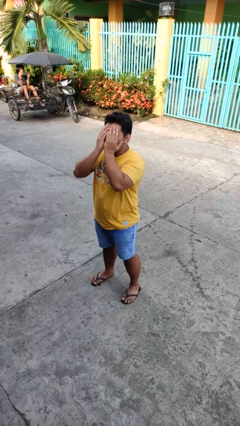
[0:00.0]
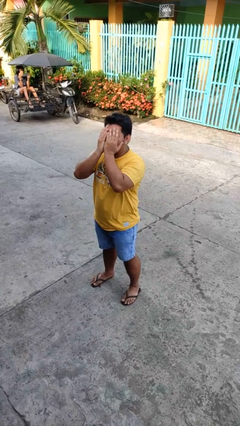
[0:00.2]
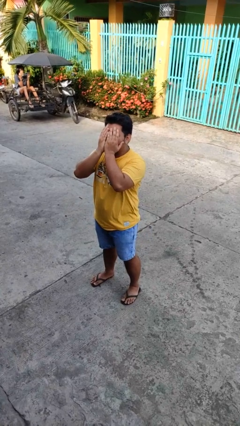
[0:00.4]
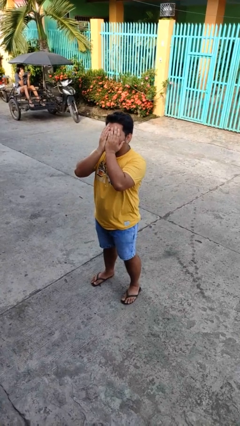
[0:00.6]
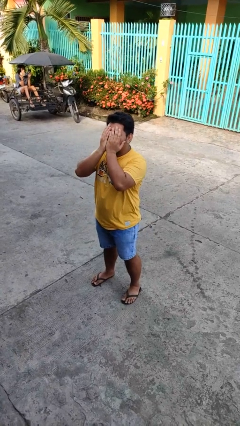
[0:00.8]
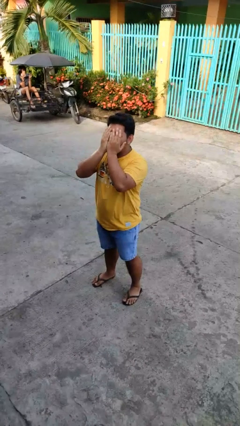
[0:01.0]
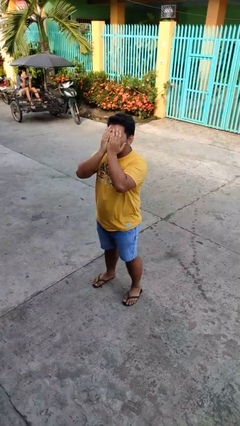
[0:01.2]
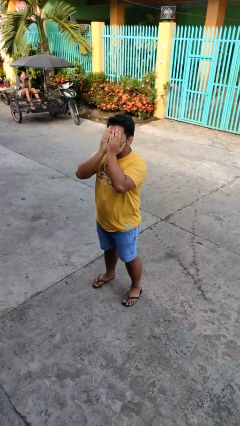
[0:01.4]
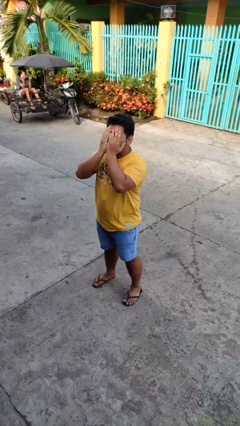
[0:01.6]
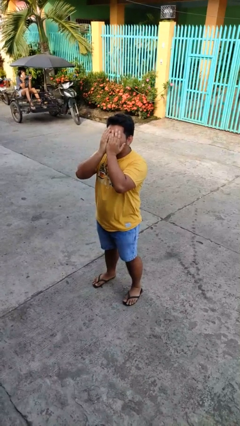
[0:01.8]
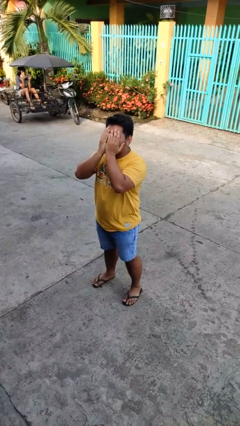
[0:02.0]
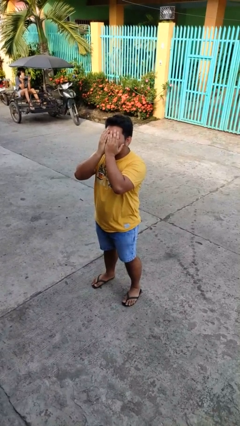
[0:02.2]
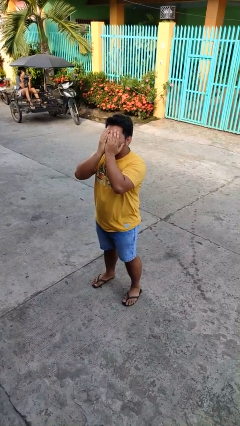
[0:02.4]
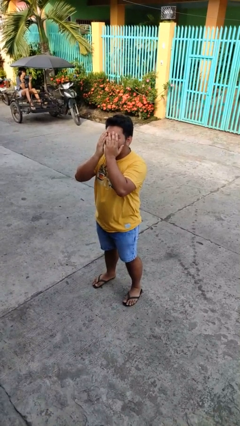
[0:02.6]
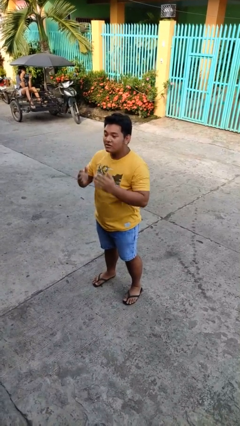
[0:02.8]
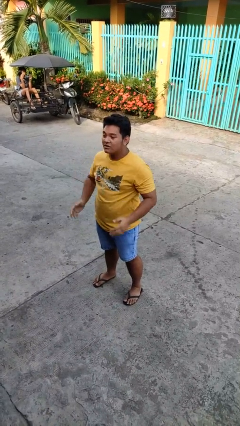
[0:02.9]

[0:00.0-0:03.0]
person covers face with hands

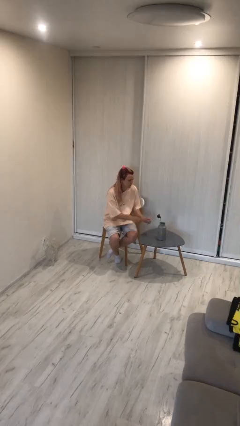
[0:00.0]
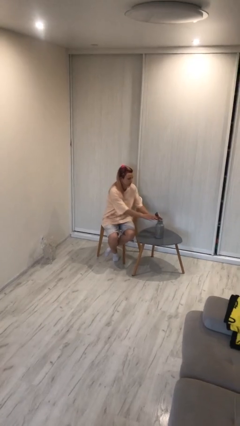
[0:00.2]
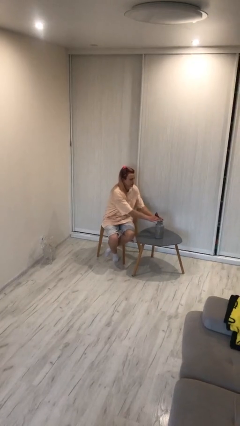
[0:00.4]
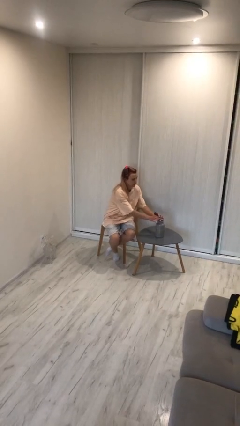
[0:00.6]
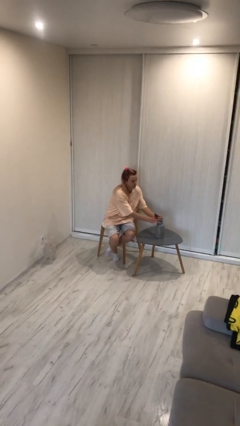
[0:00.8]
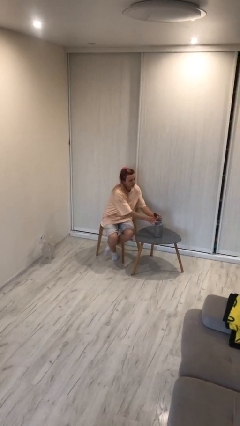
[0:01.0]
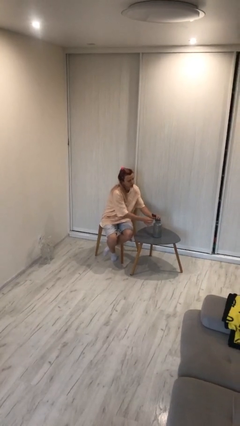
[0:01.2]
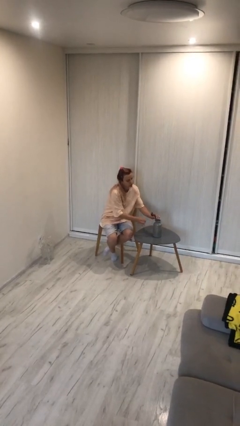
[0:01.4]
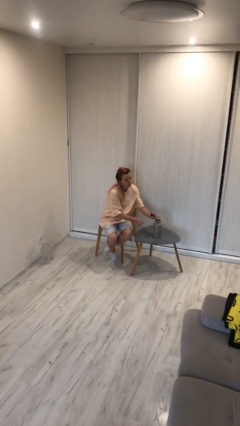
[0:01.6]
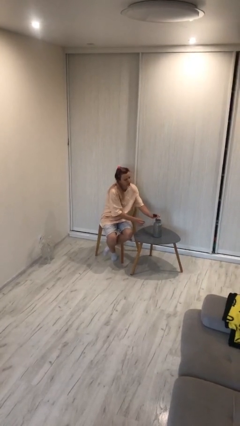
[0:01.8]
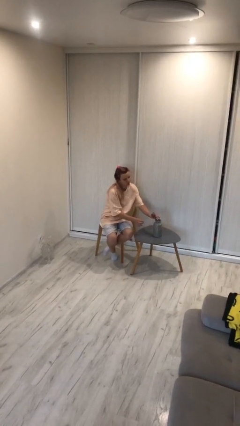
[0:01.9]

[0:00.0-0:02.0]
person arranges flowers in vase

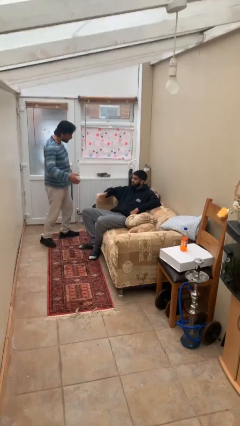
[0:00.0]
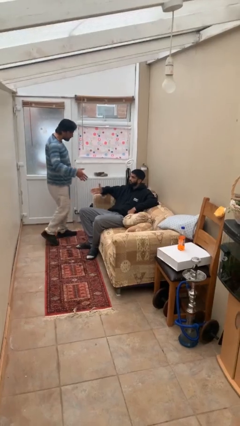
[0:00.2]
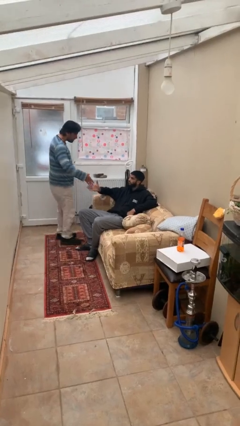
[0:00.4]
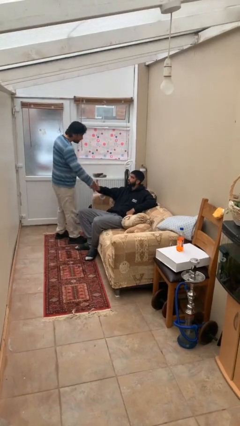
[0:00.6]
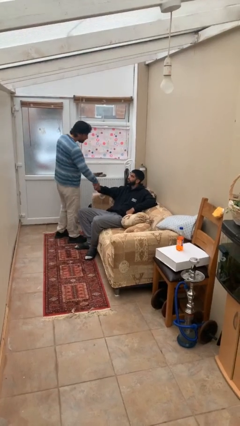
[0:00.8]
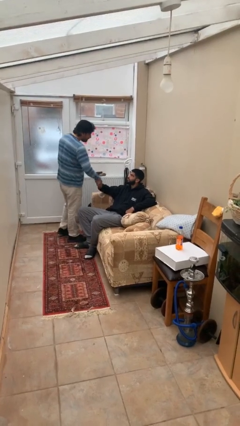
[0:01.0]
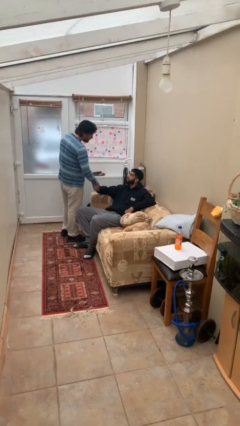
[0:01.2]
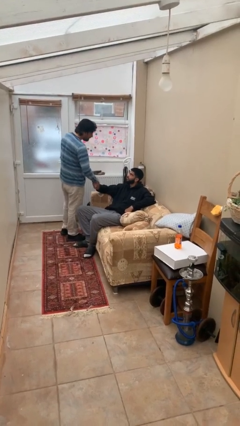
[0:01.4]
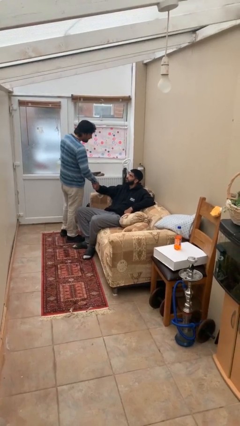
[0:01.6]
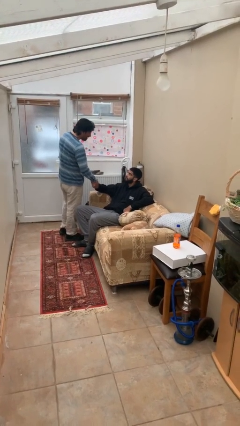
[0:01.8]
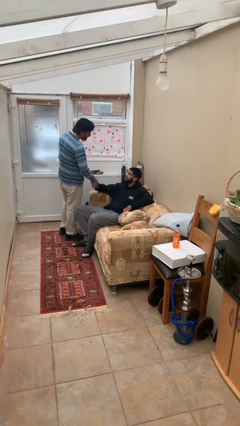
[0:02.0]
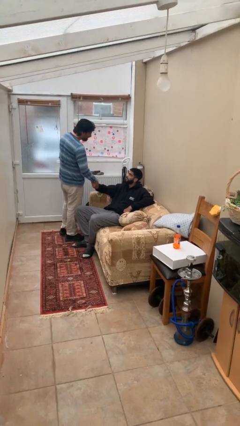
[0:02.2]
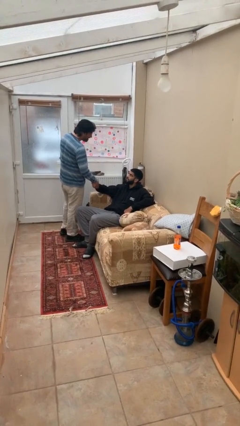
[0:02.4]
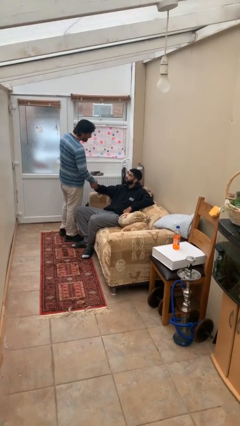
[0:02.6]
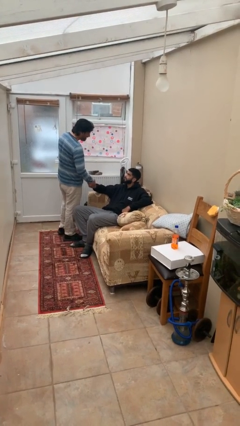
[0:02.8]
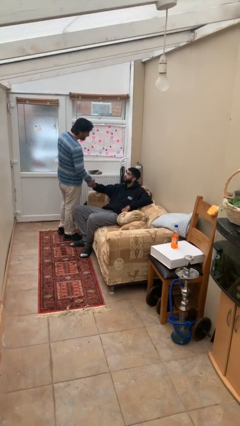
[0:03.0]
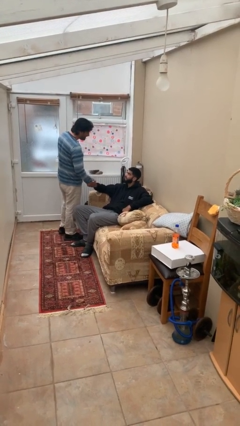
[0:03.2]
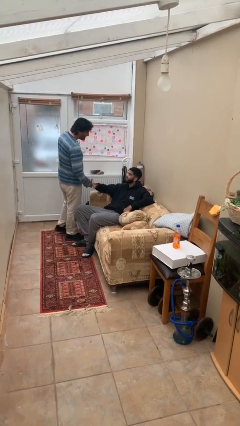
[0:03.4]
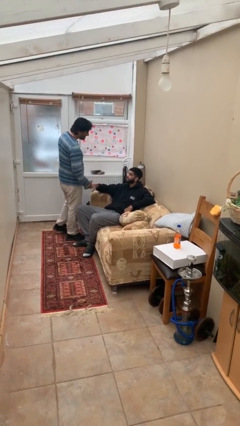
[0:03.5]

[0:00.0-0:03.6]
person shakes hand

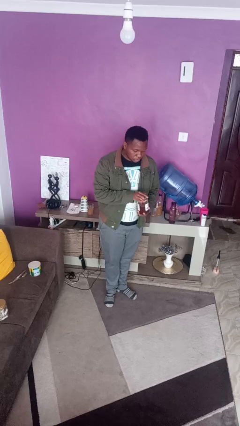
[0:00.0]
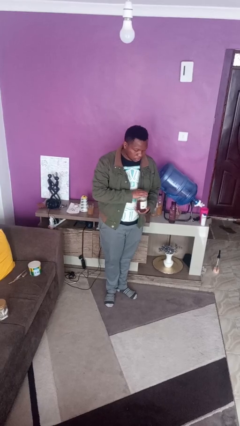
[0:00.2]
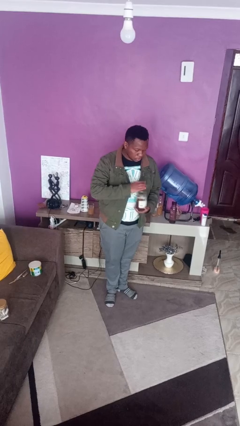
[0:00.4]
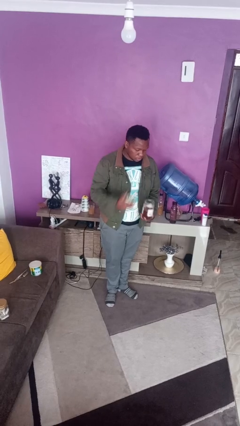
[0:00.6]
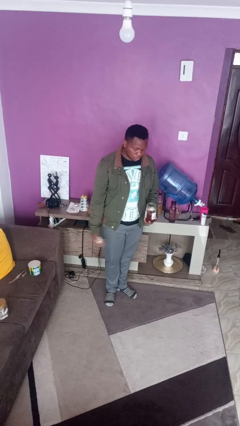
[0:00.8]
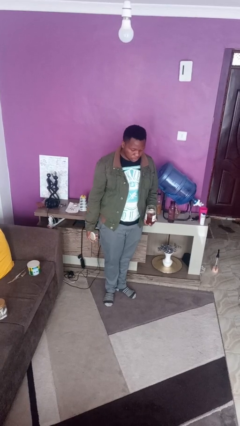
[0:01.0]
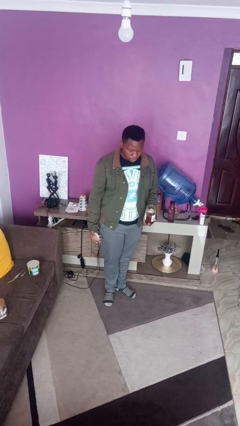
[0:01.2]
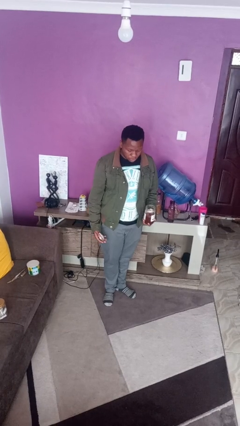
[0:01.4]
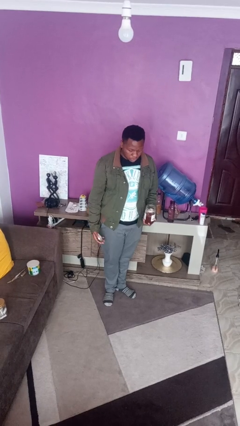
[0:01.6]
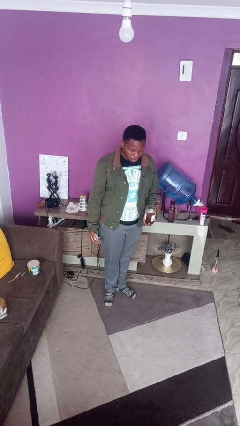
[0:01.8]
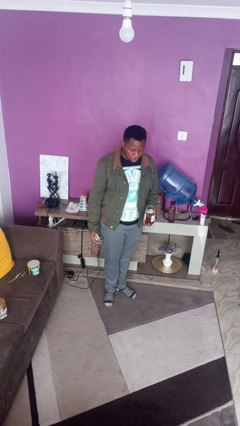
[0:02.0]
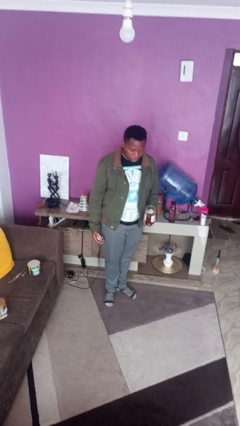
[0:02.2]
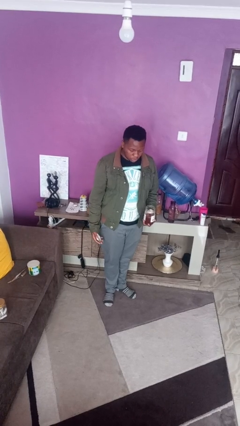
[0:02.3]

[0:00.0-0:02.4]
person opens jar

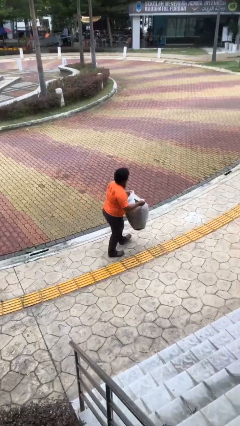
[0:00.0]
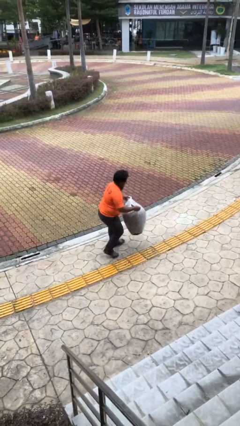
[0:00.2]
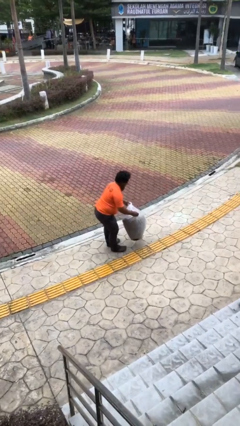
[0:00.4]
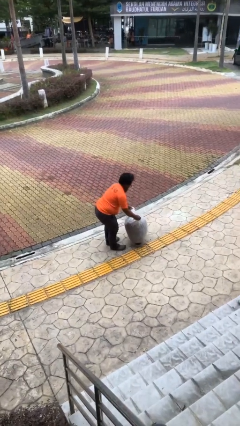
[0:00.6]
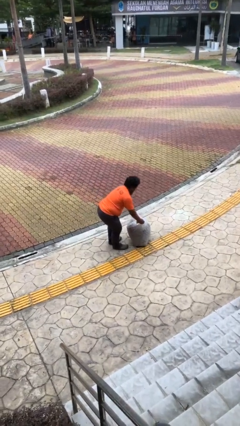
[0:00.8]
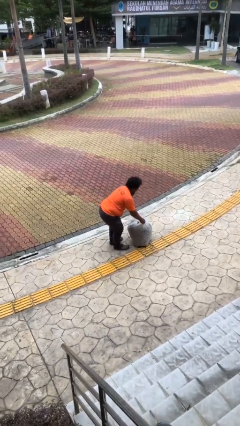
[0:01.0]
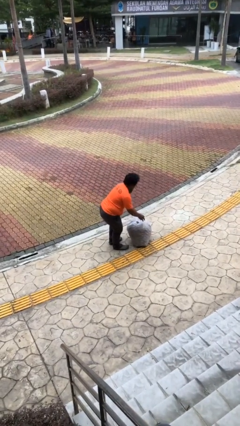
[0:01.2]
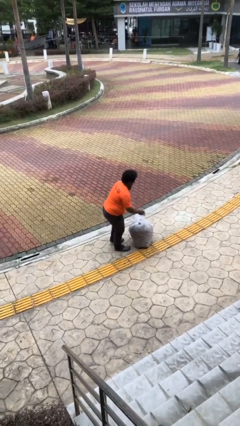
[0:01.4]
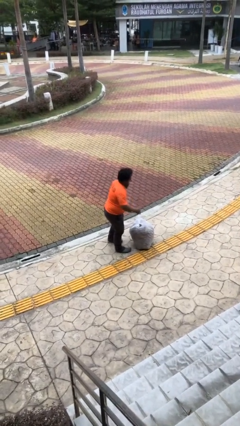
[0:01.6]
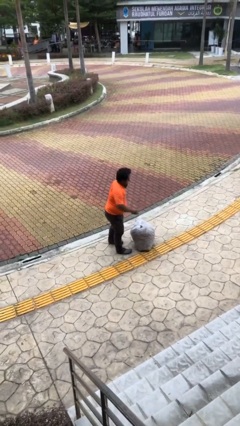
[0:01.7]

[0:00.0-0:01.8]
person puts down object on floor

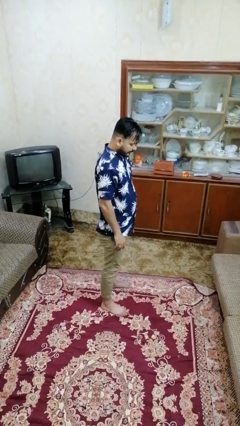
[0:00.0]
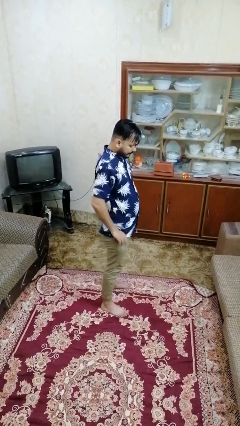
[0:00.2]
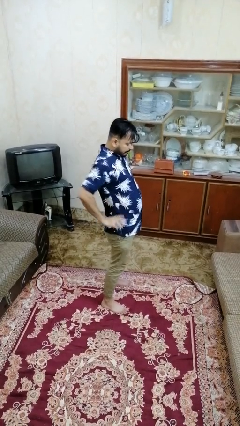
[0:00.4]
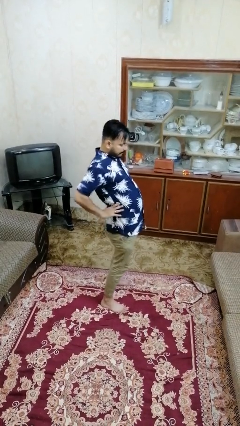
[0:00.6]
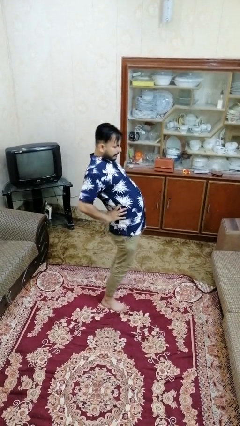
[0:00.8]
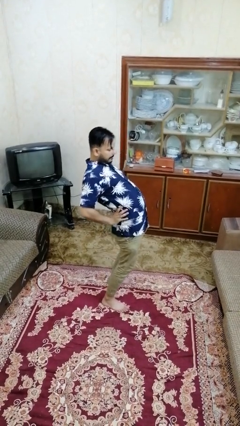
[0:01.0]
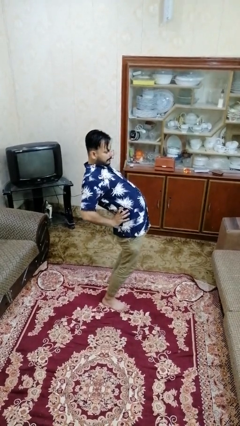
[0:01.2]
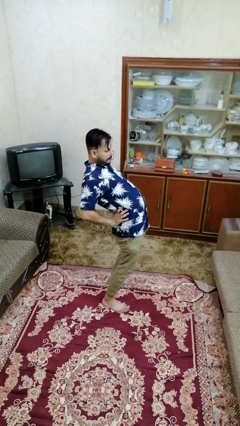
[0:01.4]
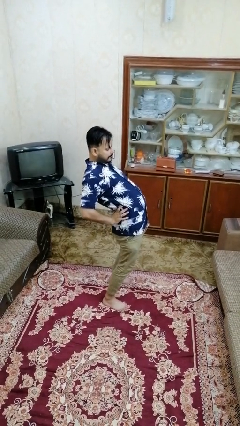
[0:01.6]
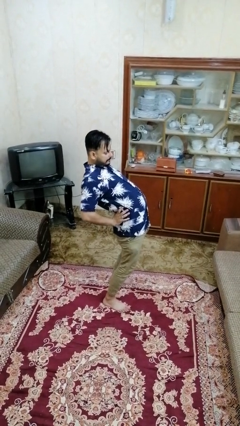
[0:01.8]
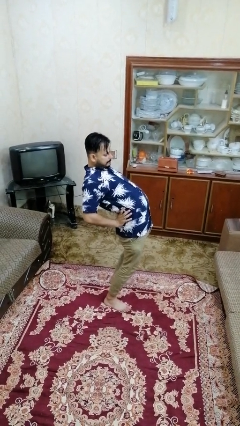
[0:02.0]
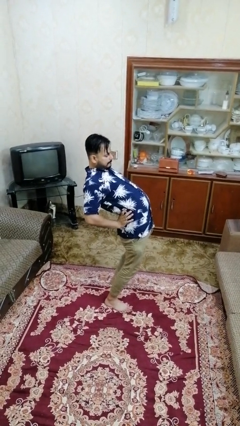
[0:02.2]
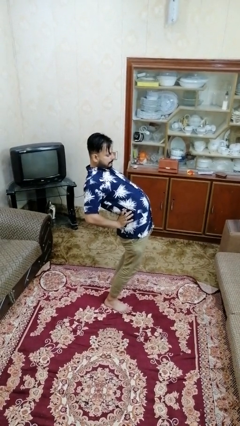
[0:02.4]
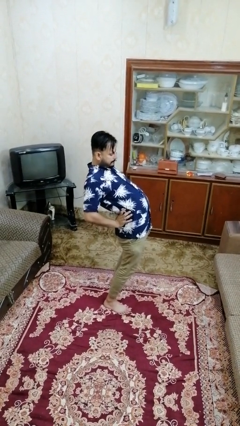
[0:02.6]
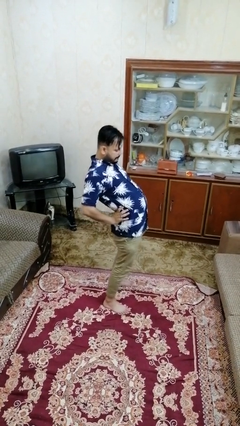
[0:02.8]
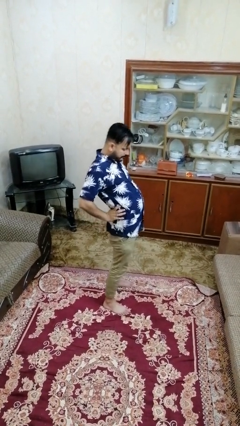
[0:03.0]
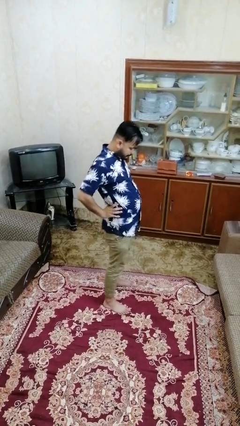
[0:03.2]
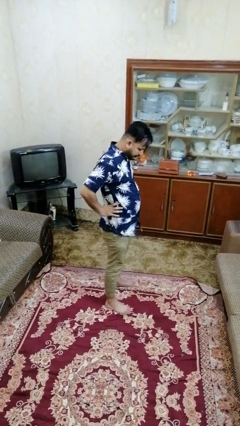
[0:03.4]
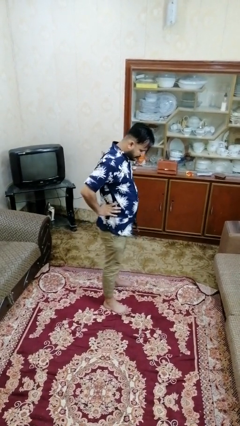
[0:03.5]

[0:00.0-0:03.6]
person stretches back

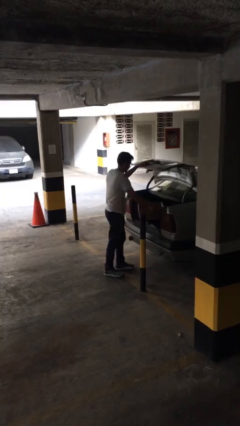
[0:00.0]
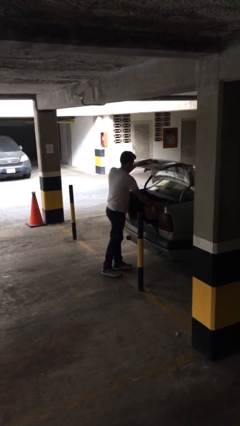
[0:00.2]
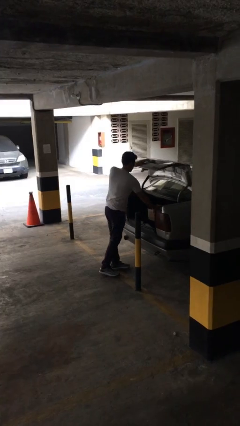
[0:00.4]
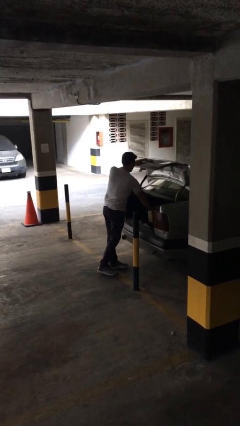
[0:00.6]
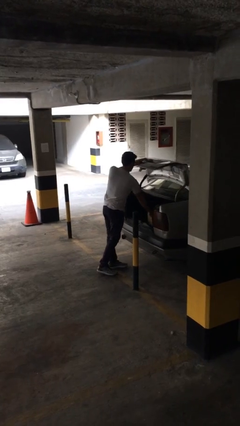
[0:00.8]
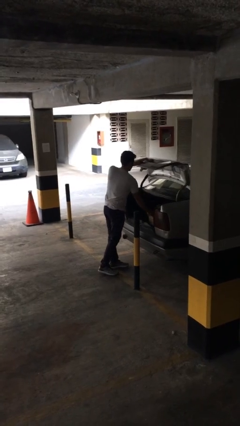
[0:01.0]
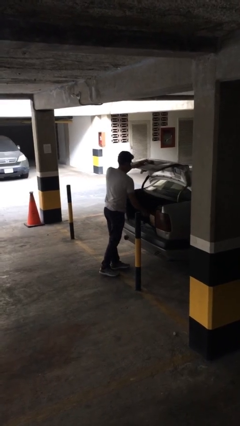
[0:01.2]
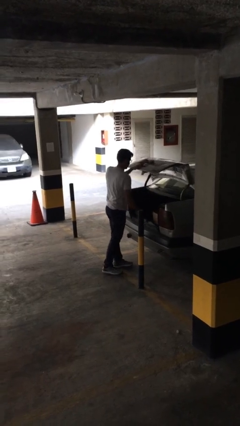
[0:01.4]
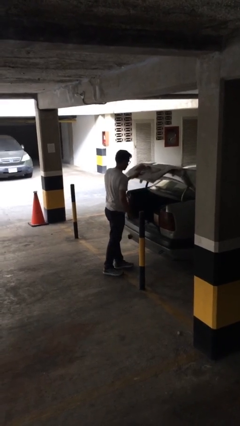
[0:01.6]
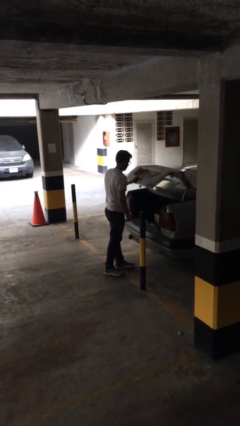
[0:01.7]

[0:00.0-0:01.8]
person loads car
